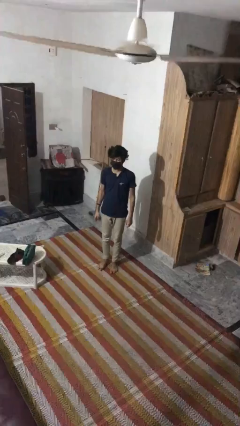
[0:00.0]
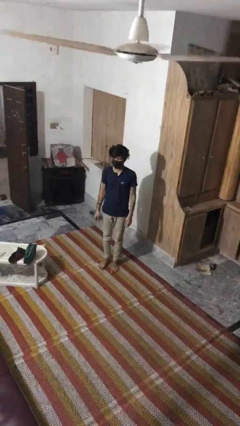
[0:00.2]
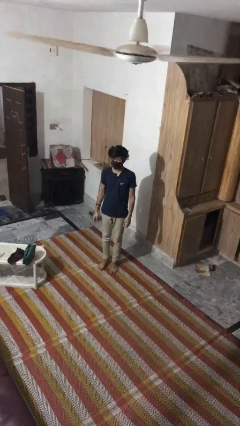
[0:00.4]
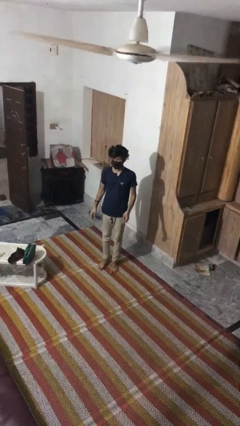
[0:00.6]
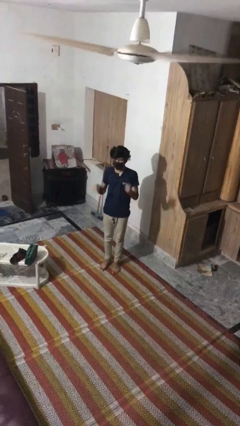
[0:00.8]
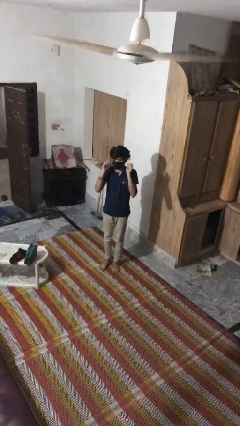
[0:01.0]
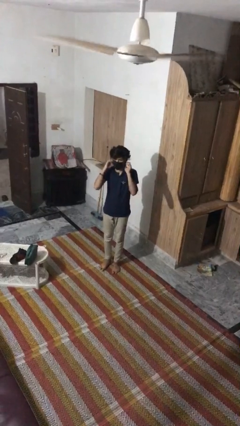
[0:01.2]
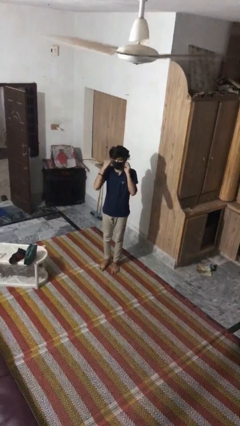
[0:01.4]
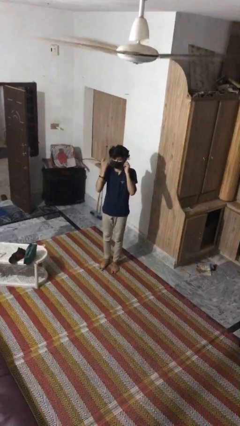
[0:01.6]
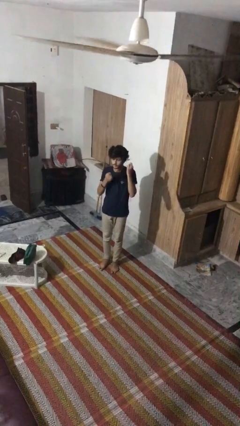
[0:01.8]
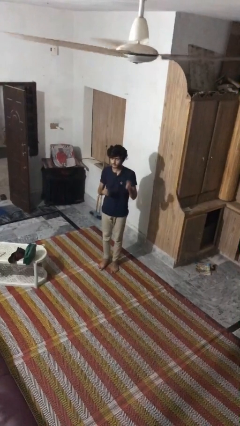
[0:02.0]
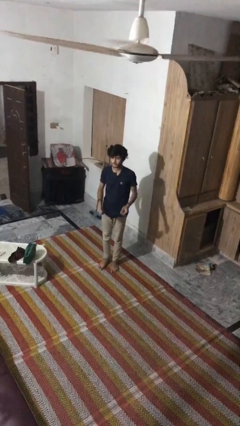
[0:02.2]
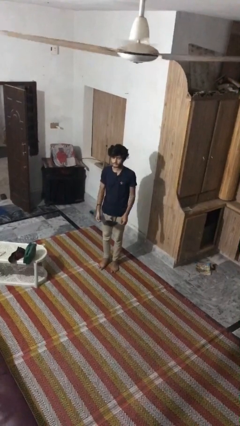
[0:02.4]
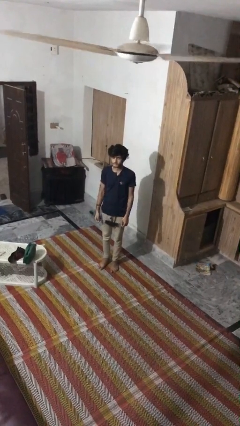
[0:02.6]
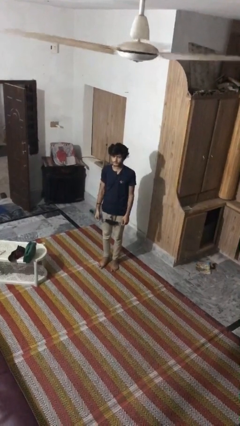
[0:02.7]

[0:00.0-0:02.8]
person takes off facemask

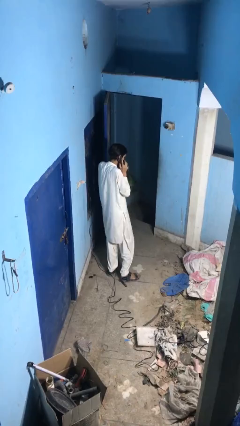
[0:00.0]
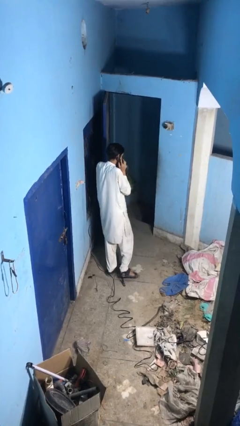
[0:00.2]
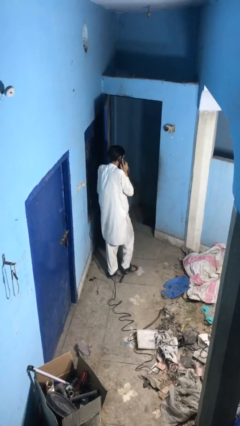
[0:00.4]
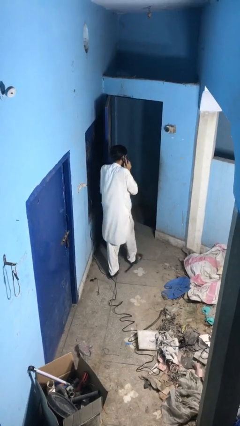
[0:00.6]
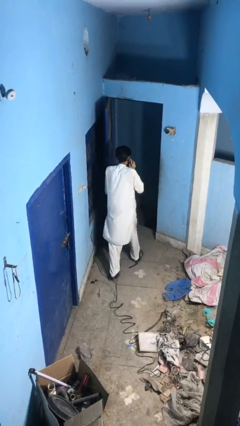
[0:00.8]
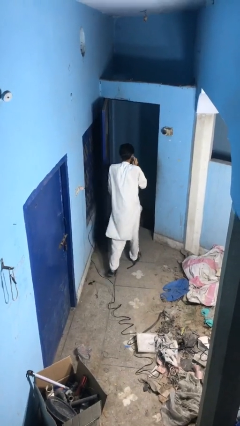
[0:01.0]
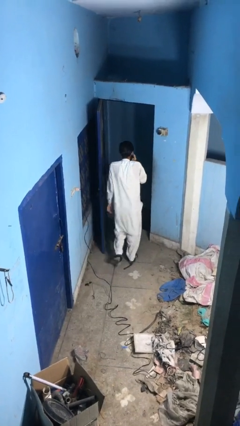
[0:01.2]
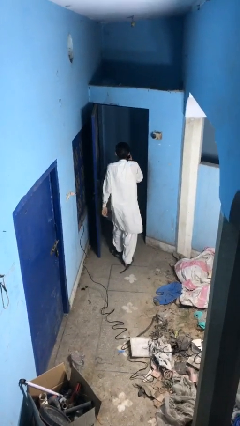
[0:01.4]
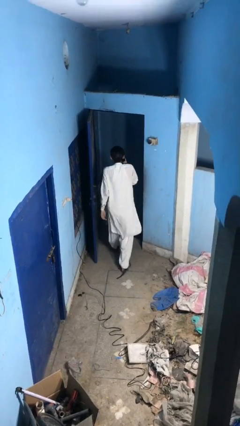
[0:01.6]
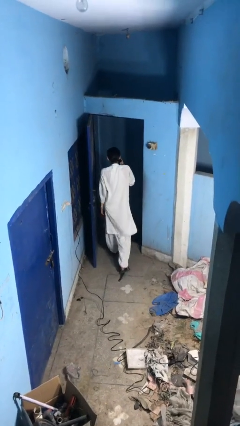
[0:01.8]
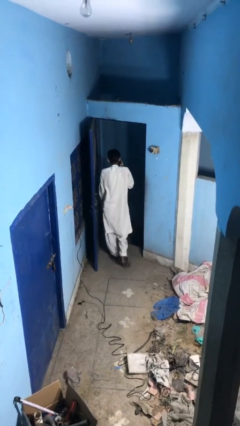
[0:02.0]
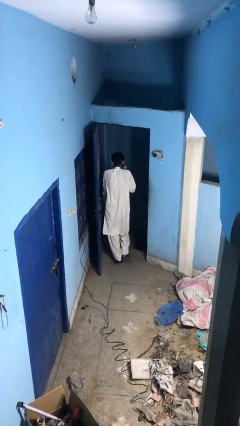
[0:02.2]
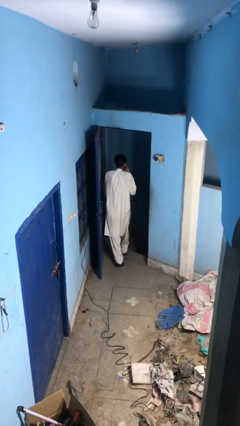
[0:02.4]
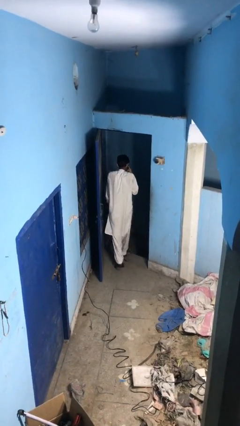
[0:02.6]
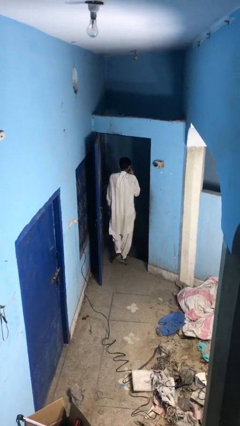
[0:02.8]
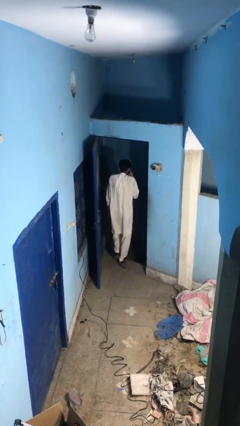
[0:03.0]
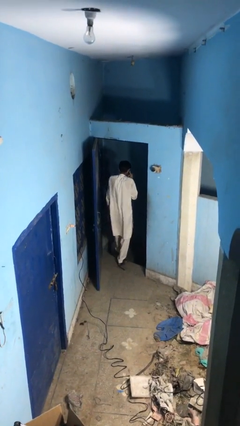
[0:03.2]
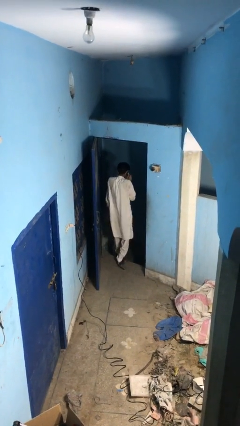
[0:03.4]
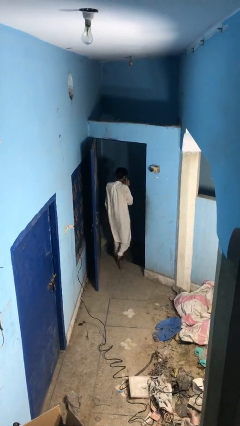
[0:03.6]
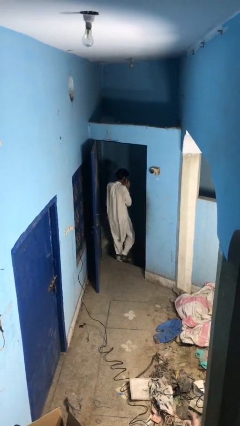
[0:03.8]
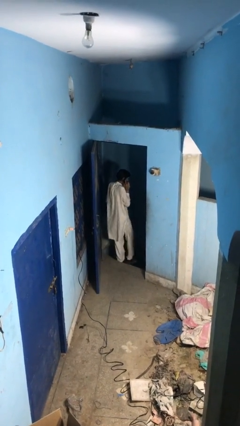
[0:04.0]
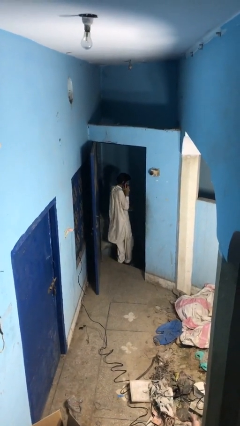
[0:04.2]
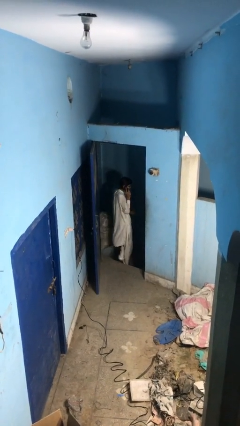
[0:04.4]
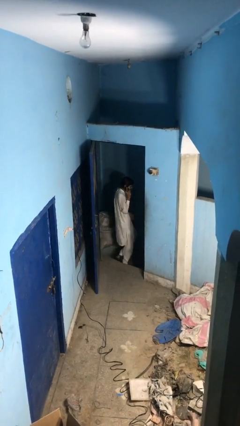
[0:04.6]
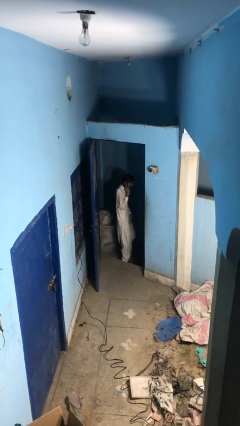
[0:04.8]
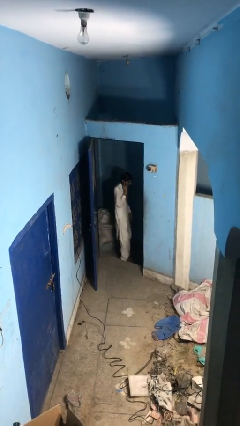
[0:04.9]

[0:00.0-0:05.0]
person exits scene through structure

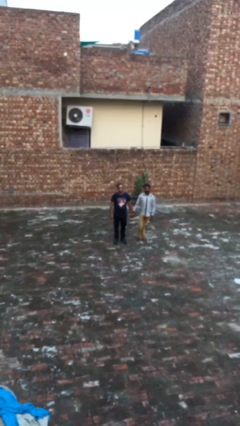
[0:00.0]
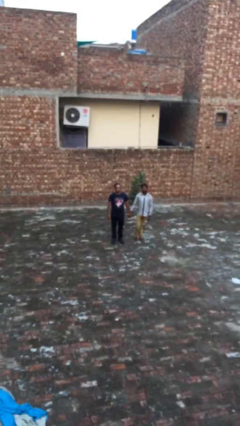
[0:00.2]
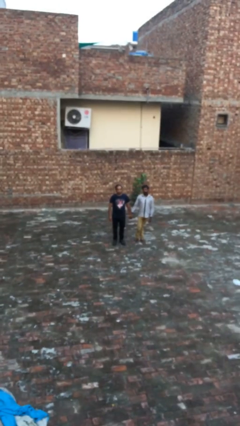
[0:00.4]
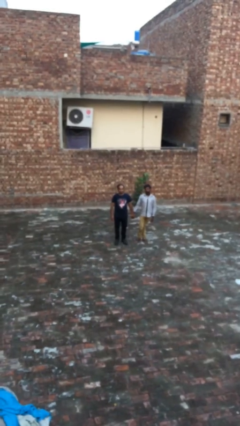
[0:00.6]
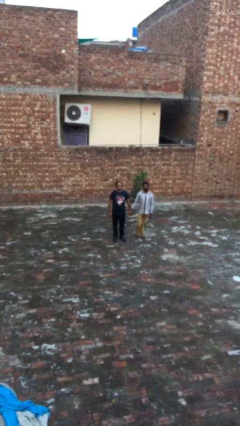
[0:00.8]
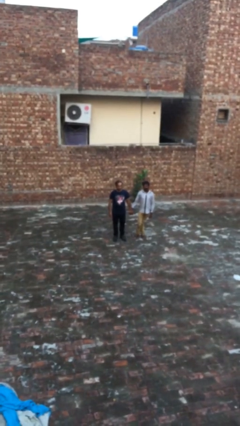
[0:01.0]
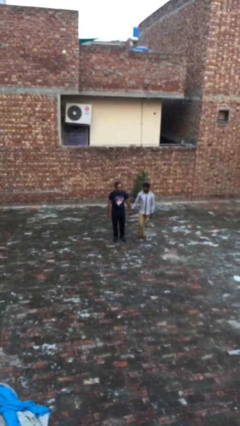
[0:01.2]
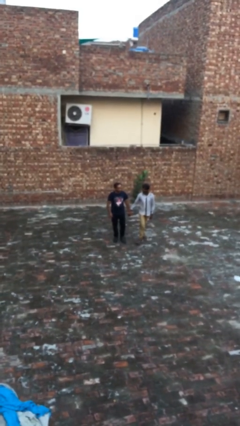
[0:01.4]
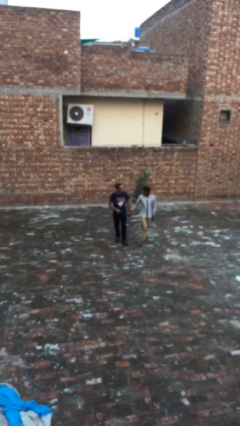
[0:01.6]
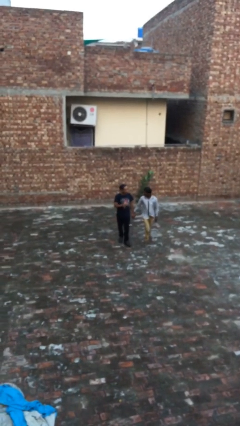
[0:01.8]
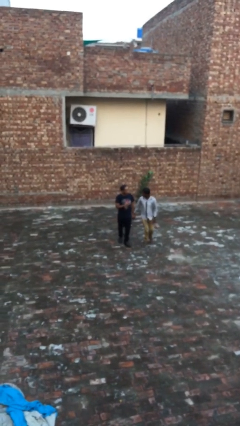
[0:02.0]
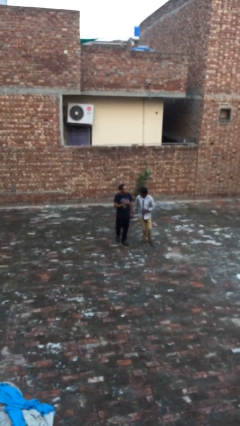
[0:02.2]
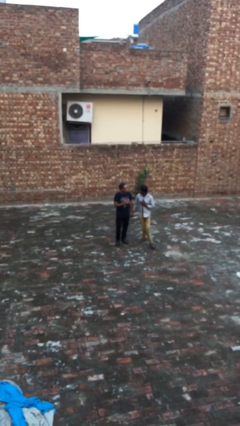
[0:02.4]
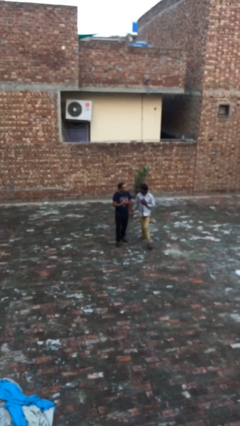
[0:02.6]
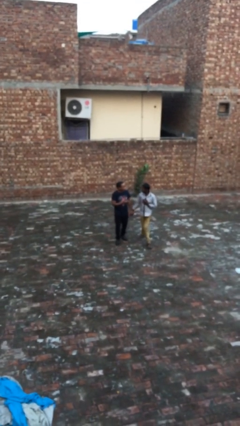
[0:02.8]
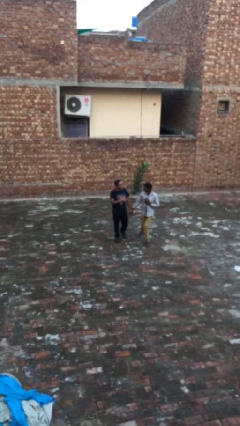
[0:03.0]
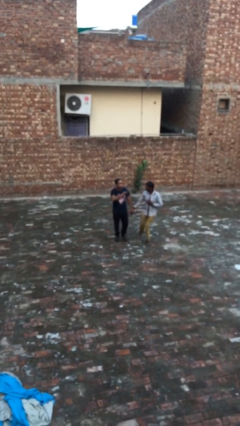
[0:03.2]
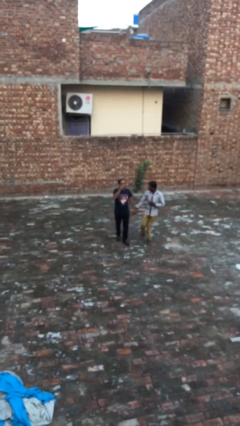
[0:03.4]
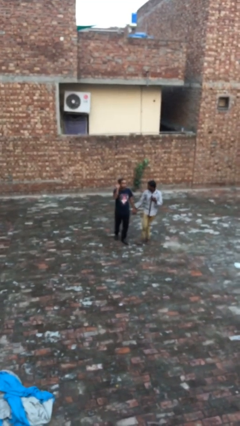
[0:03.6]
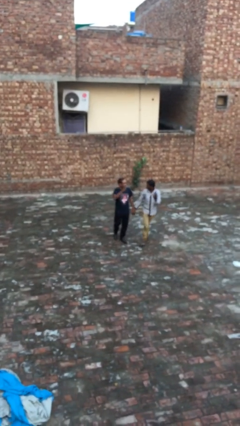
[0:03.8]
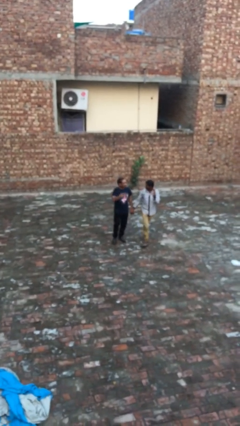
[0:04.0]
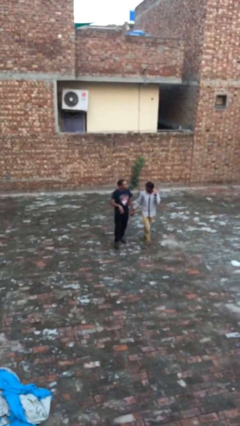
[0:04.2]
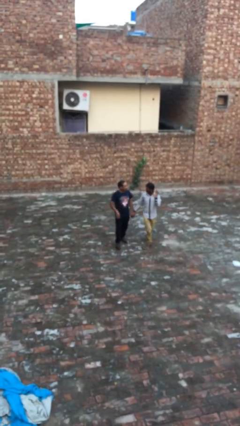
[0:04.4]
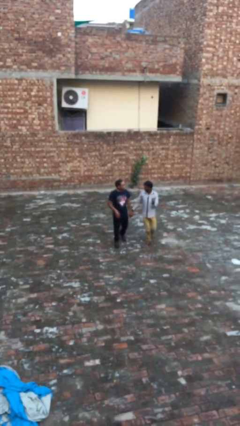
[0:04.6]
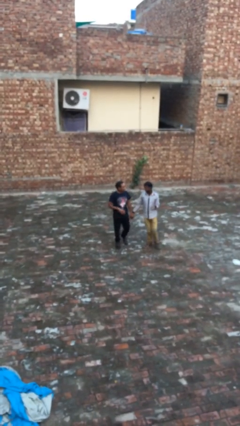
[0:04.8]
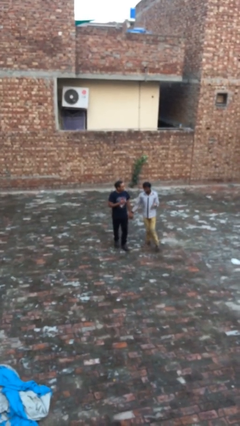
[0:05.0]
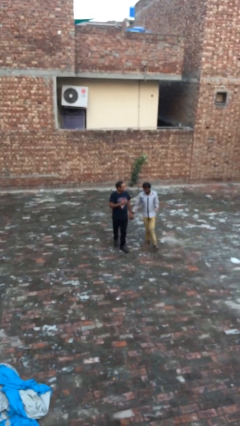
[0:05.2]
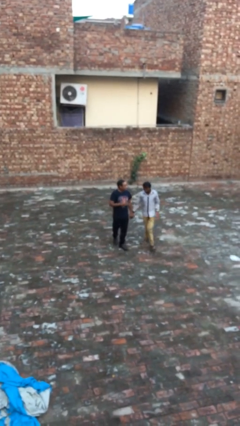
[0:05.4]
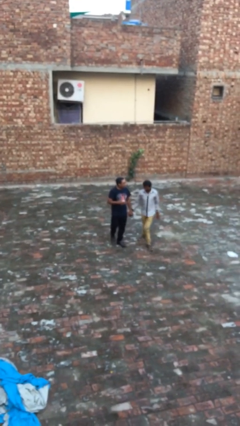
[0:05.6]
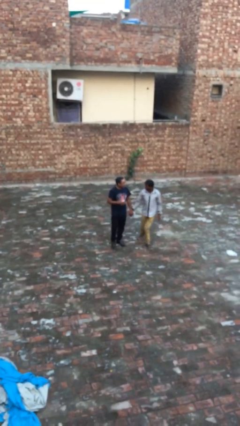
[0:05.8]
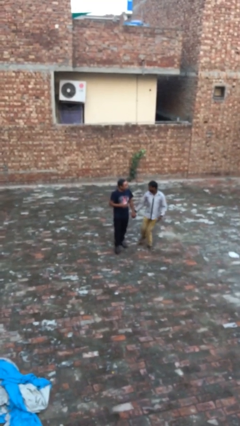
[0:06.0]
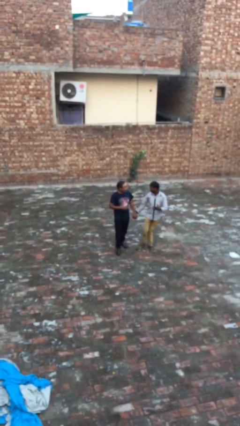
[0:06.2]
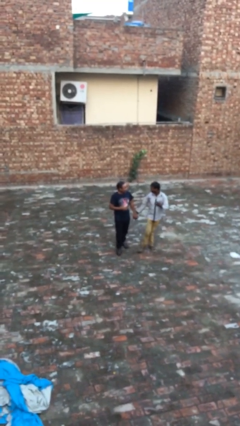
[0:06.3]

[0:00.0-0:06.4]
person holds hand

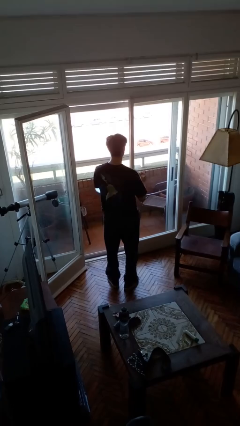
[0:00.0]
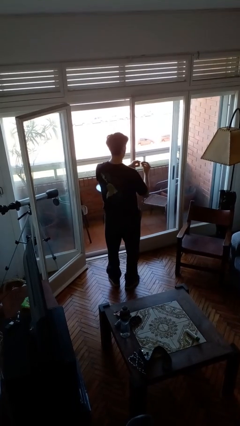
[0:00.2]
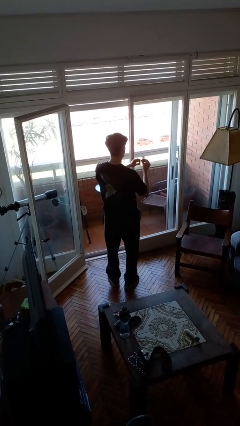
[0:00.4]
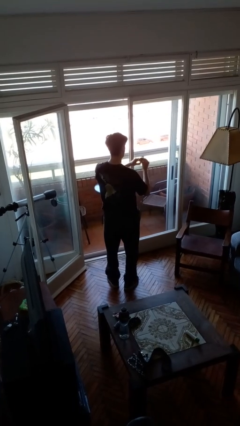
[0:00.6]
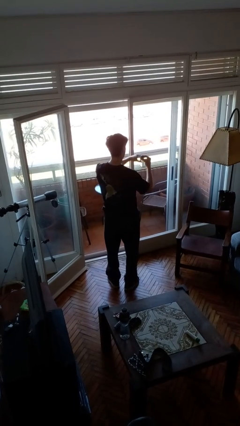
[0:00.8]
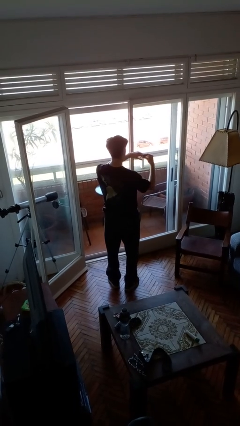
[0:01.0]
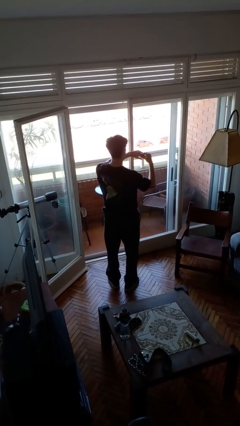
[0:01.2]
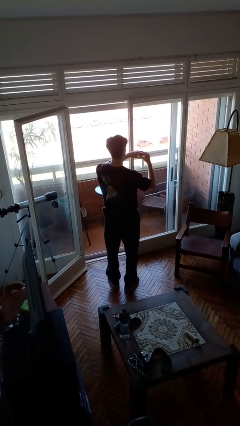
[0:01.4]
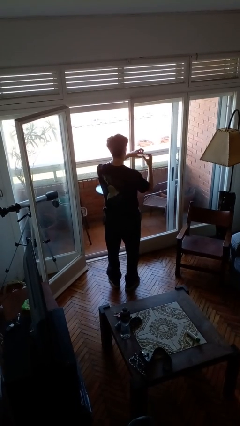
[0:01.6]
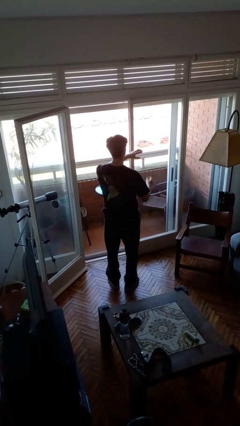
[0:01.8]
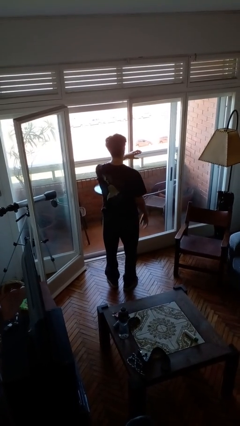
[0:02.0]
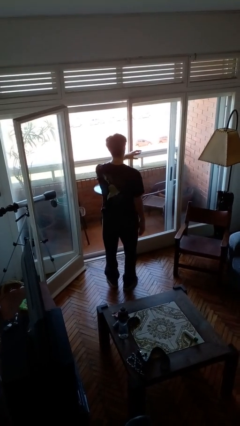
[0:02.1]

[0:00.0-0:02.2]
person puts on ring

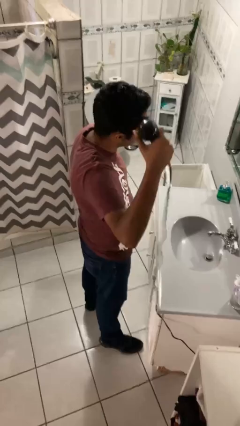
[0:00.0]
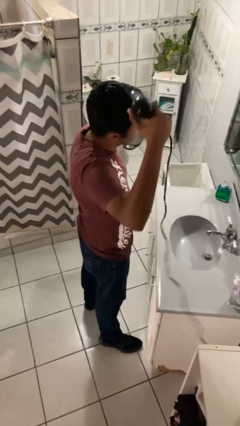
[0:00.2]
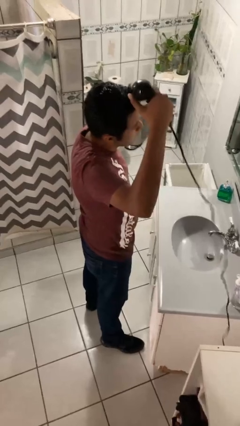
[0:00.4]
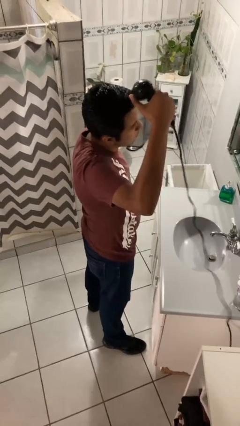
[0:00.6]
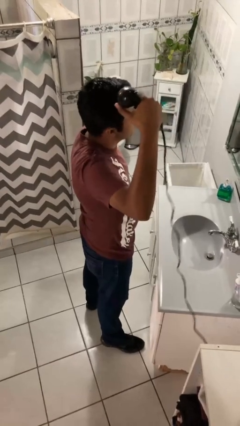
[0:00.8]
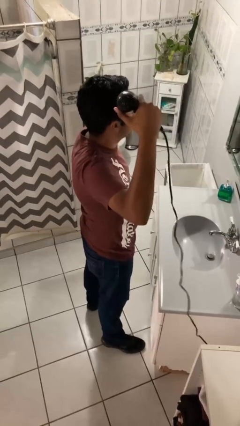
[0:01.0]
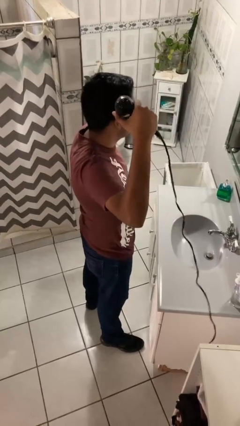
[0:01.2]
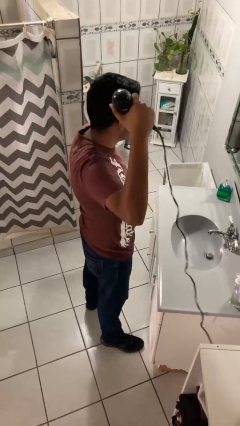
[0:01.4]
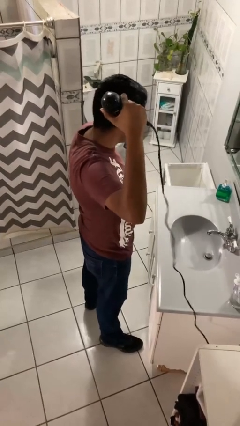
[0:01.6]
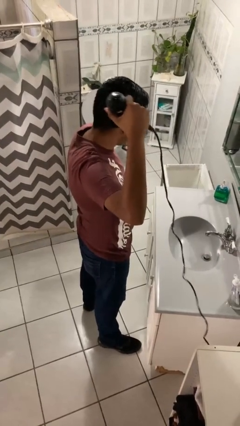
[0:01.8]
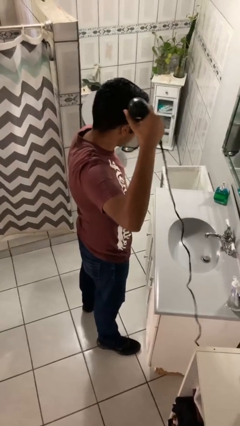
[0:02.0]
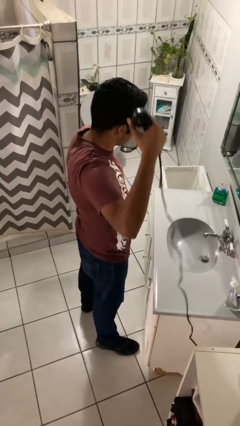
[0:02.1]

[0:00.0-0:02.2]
person dries hair with hairdryer
